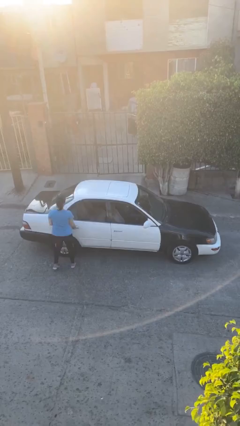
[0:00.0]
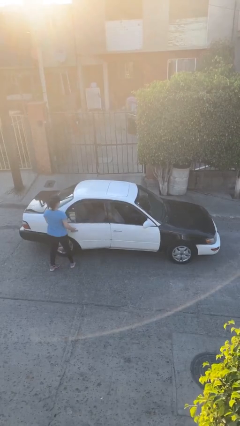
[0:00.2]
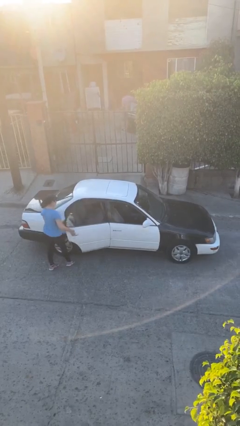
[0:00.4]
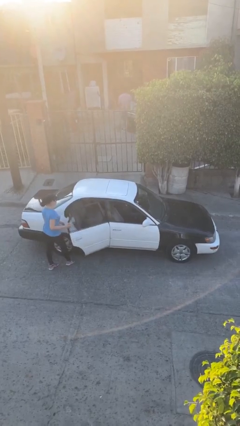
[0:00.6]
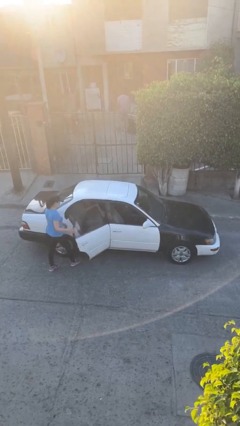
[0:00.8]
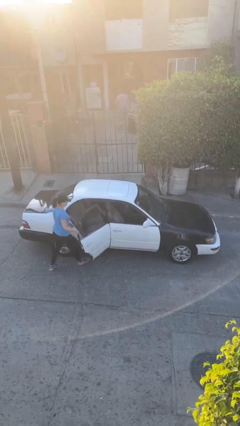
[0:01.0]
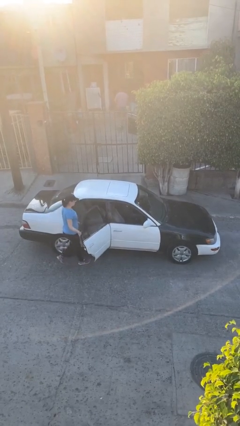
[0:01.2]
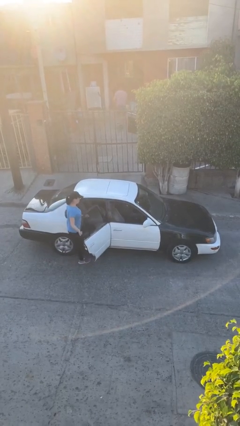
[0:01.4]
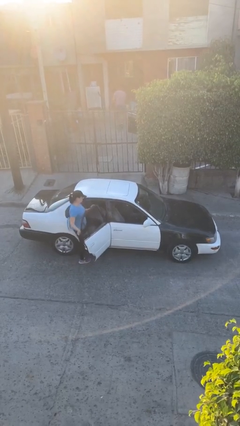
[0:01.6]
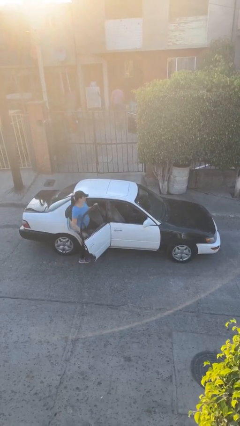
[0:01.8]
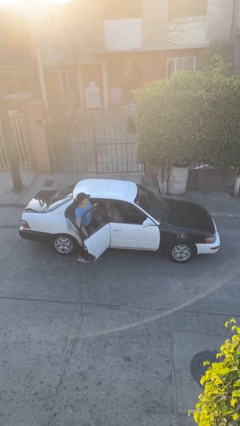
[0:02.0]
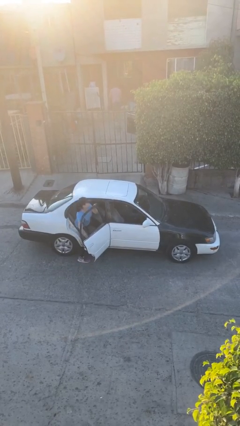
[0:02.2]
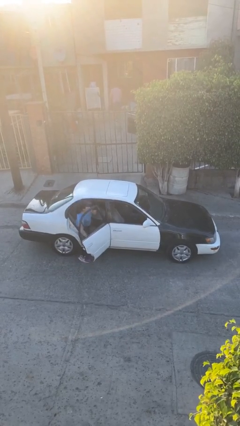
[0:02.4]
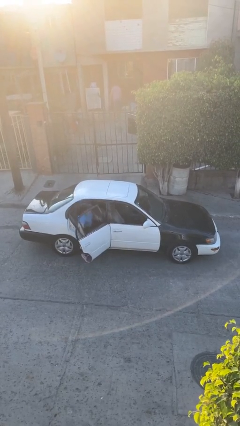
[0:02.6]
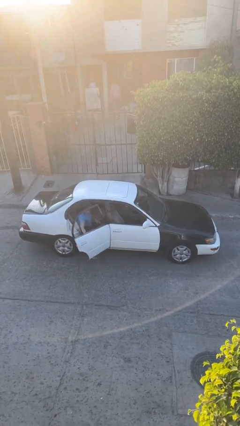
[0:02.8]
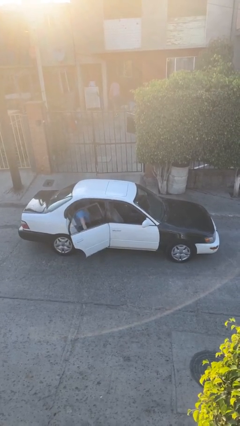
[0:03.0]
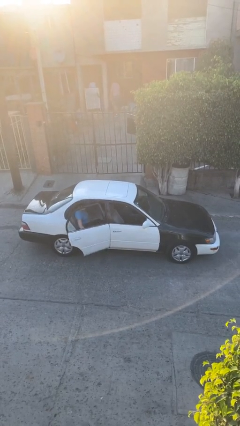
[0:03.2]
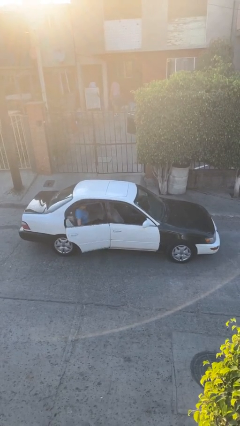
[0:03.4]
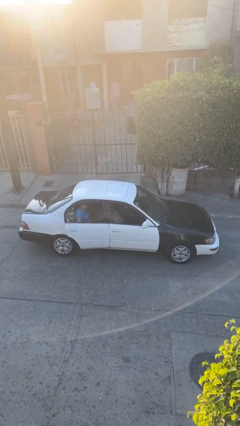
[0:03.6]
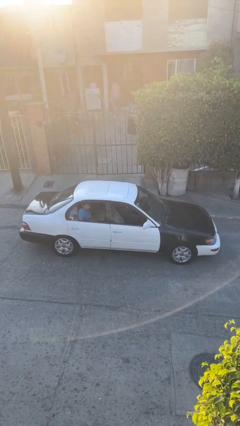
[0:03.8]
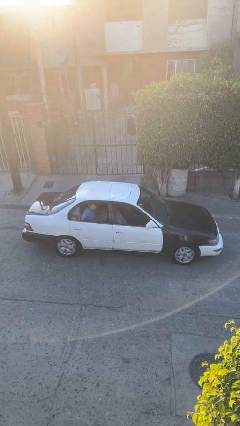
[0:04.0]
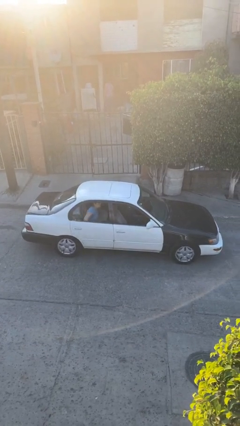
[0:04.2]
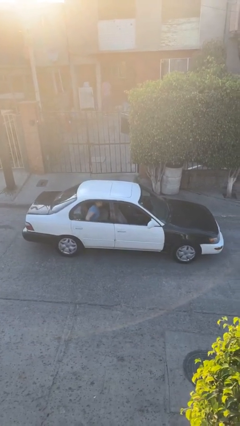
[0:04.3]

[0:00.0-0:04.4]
car picks up person

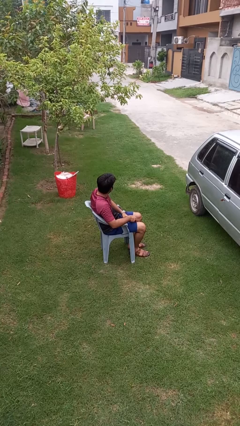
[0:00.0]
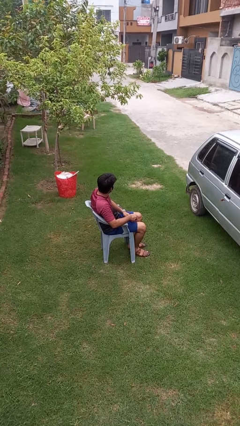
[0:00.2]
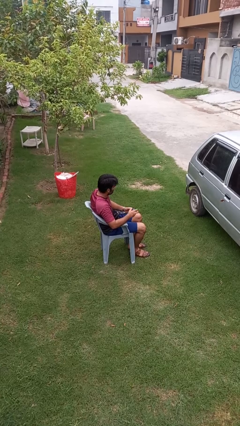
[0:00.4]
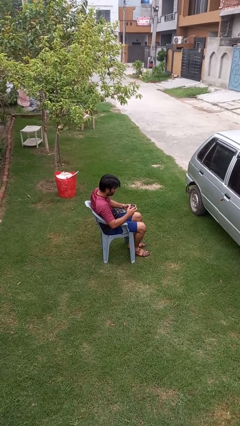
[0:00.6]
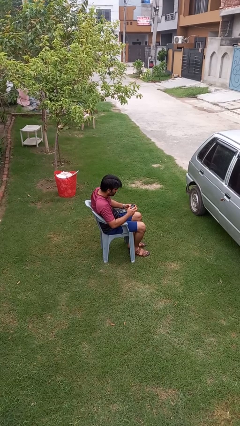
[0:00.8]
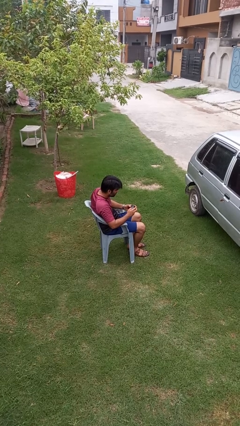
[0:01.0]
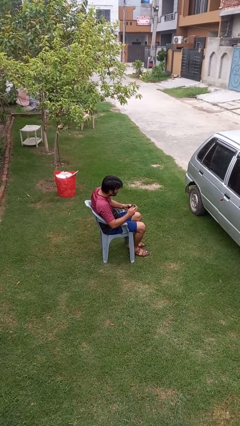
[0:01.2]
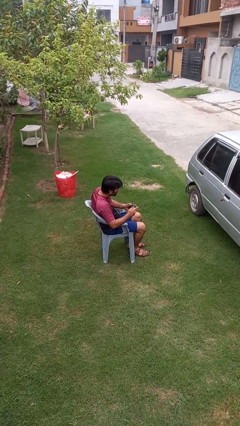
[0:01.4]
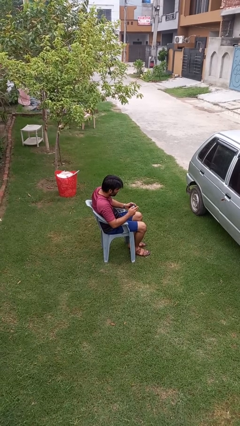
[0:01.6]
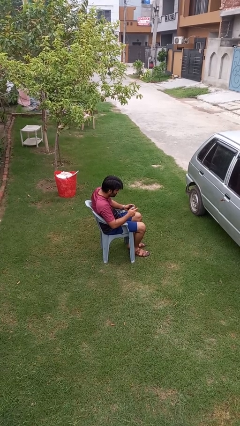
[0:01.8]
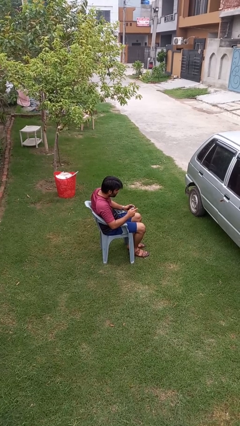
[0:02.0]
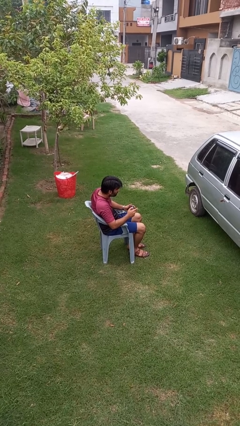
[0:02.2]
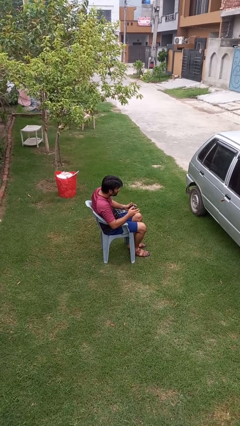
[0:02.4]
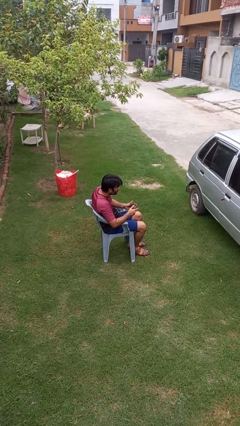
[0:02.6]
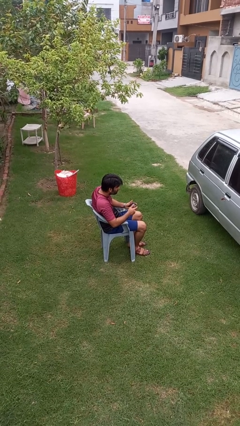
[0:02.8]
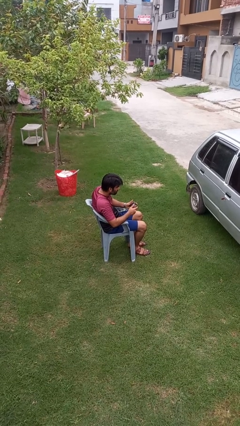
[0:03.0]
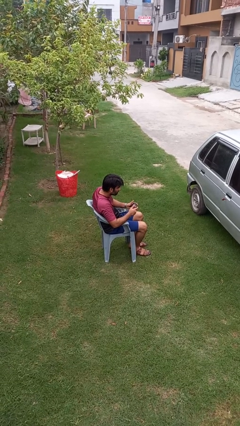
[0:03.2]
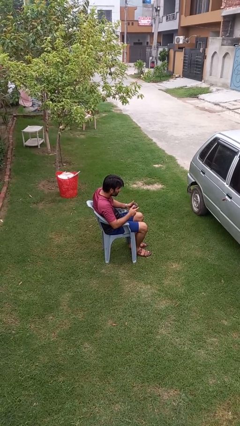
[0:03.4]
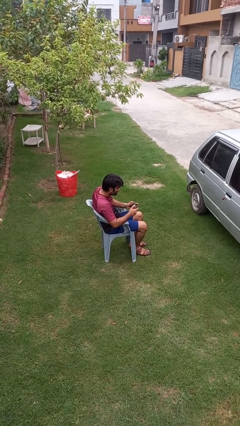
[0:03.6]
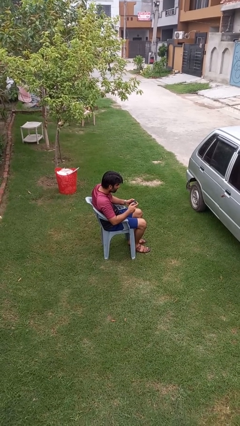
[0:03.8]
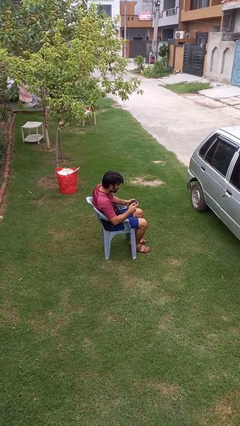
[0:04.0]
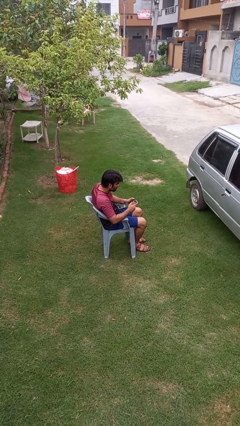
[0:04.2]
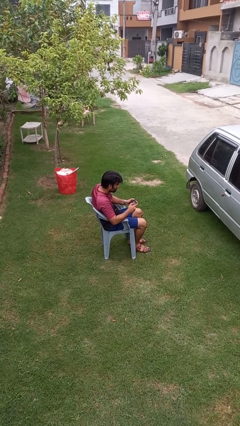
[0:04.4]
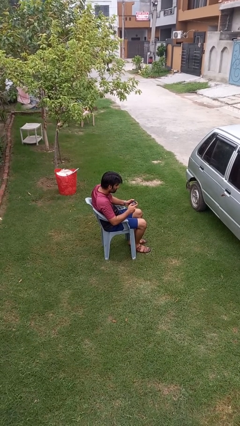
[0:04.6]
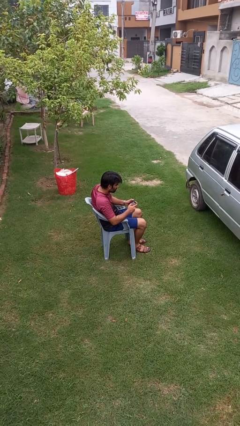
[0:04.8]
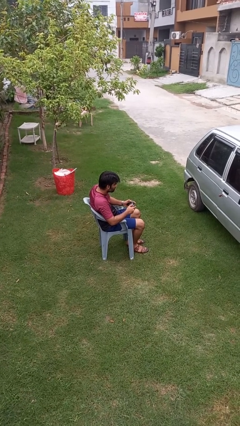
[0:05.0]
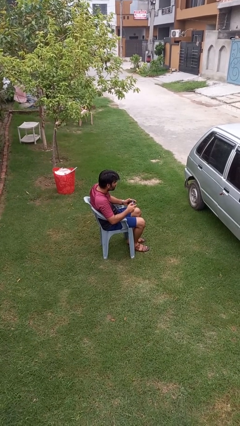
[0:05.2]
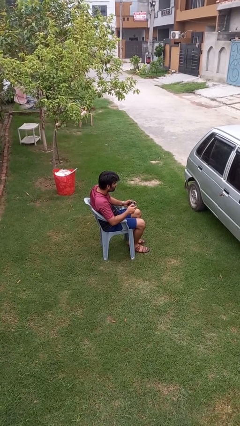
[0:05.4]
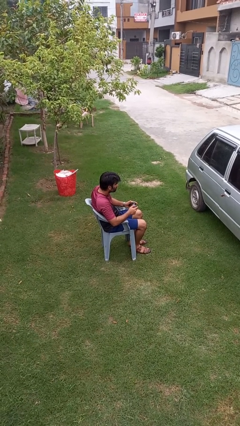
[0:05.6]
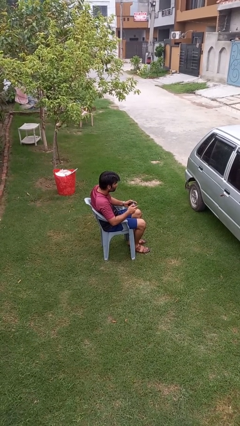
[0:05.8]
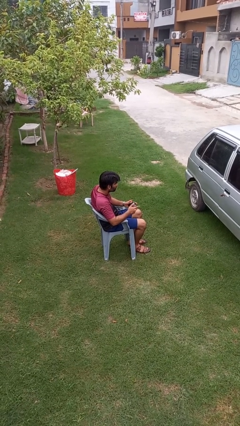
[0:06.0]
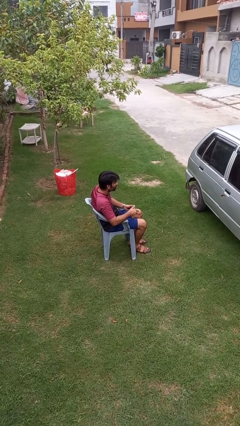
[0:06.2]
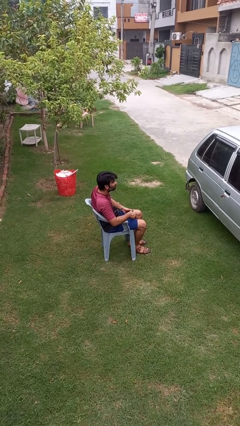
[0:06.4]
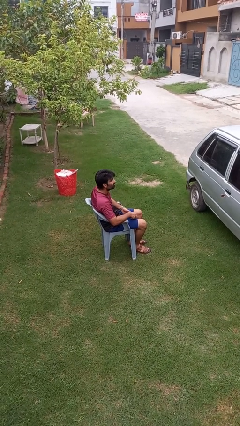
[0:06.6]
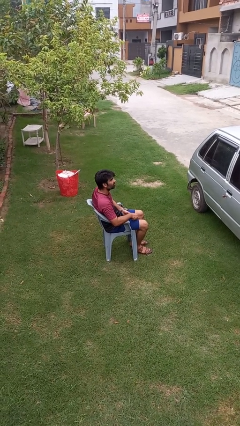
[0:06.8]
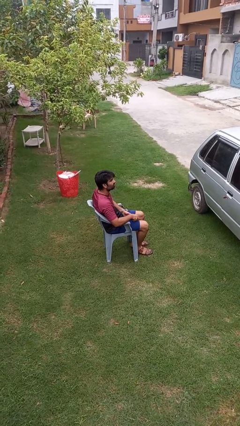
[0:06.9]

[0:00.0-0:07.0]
person interacts with handheld game

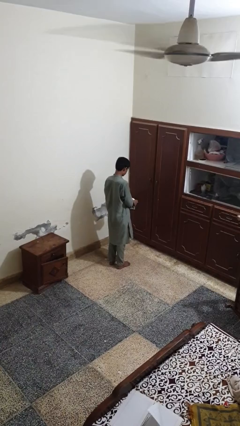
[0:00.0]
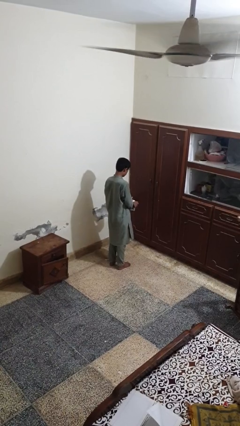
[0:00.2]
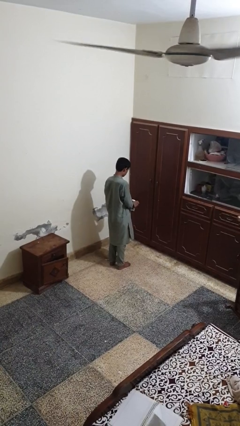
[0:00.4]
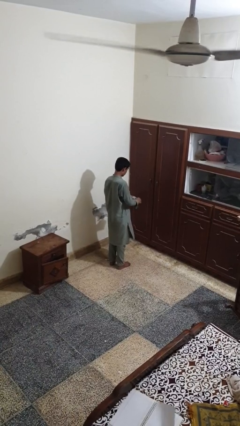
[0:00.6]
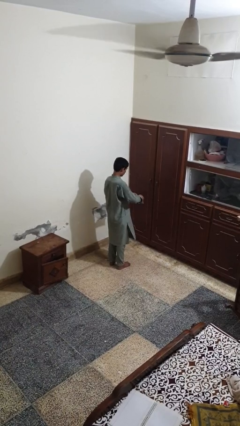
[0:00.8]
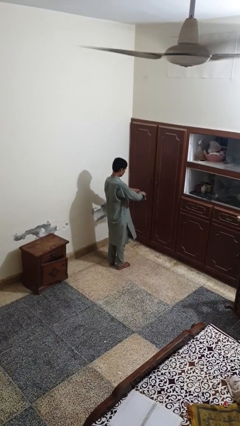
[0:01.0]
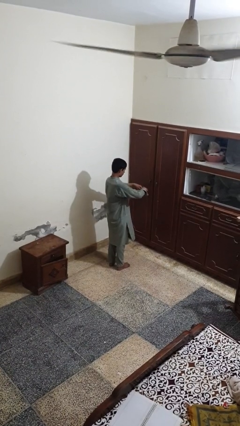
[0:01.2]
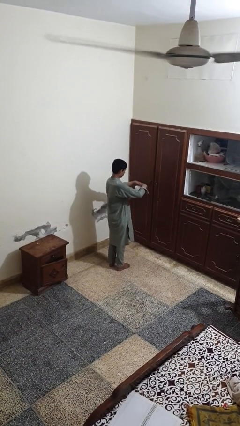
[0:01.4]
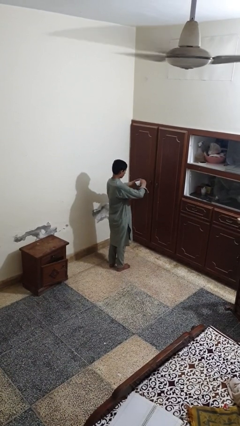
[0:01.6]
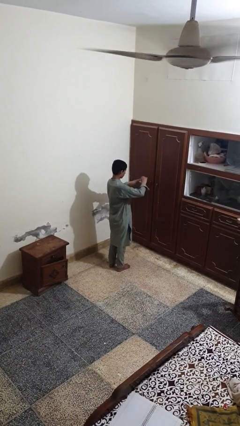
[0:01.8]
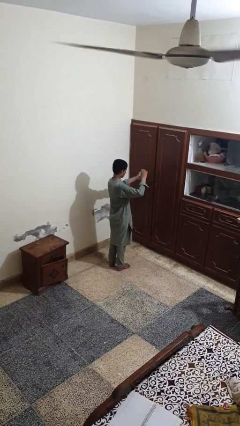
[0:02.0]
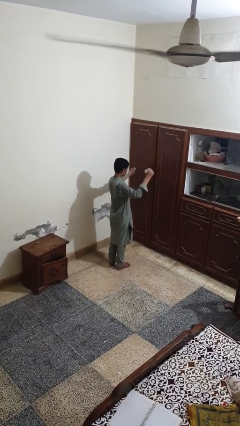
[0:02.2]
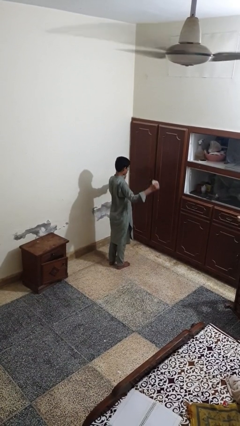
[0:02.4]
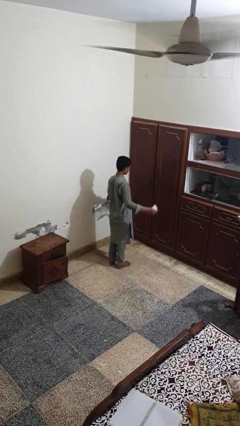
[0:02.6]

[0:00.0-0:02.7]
person tears paper

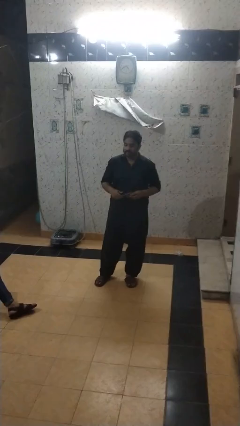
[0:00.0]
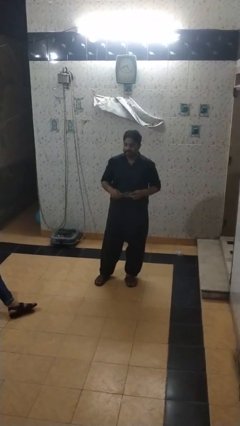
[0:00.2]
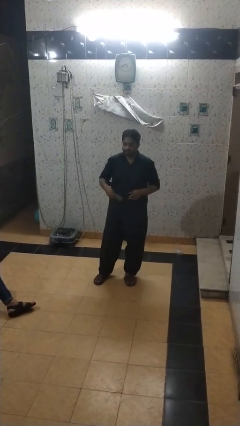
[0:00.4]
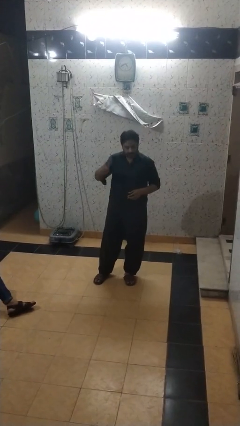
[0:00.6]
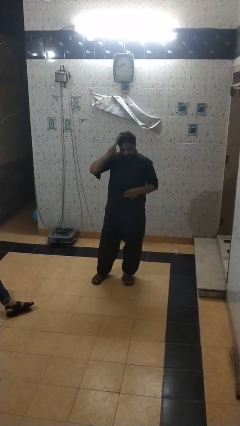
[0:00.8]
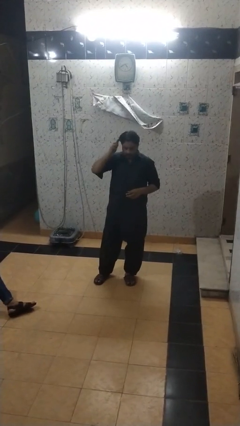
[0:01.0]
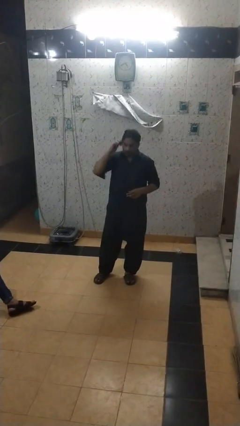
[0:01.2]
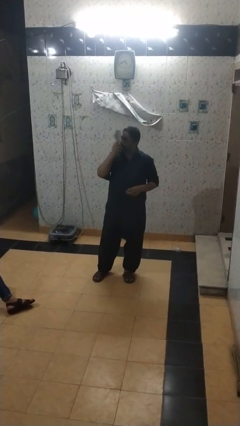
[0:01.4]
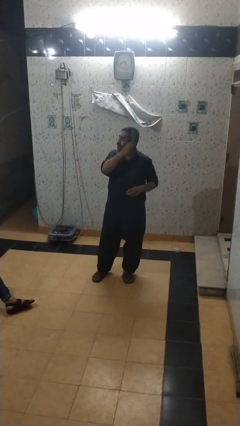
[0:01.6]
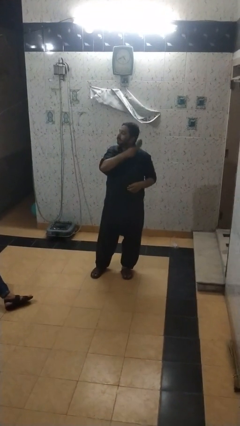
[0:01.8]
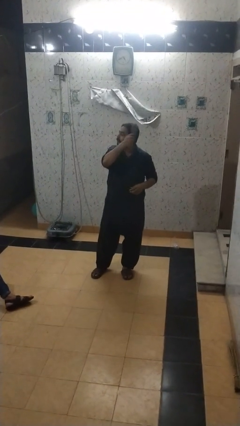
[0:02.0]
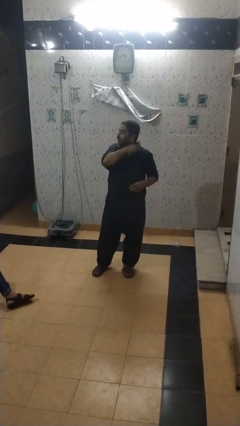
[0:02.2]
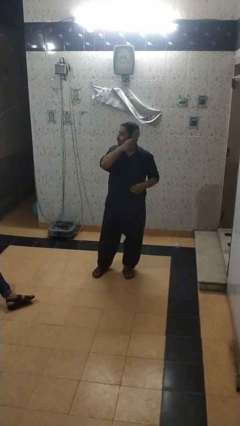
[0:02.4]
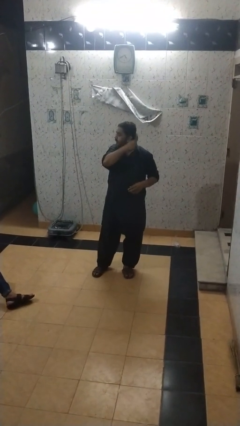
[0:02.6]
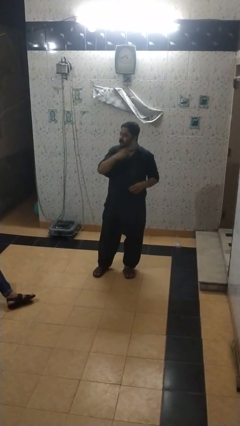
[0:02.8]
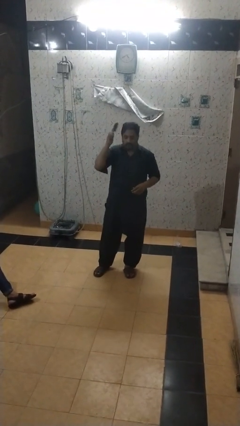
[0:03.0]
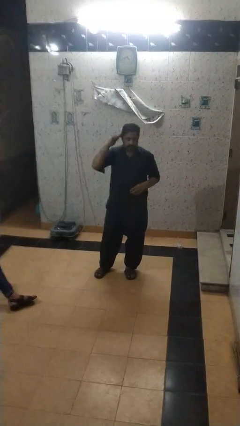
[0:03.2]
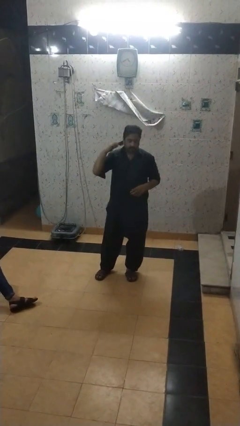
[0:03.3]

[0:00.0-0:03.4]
person brushes hair

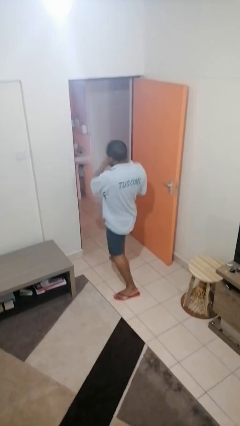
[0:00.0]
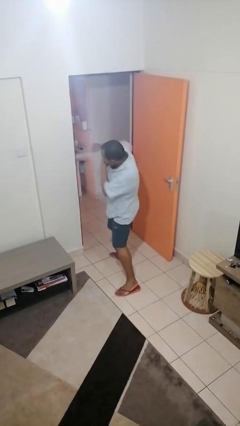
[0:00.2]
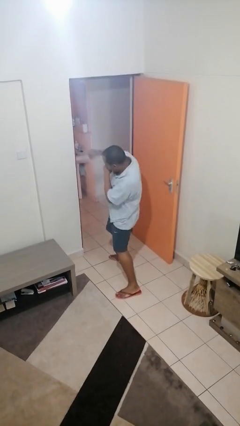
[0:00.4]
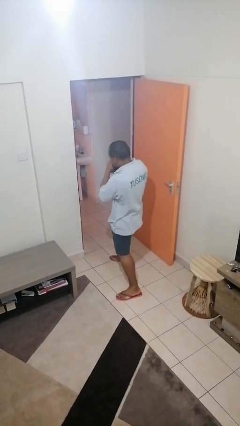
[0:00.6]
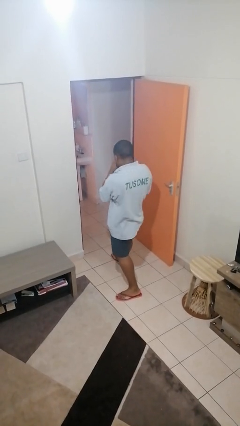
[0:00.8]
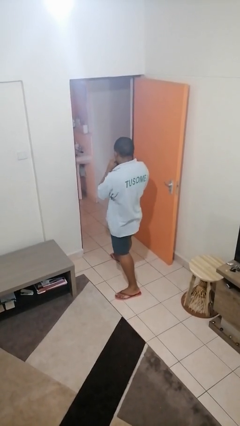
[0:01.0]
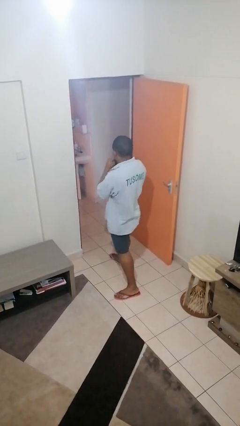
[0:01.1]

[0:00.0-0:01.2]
person punches
